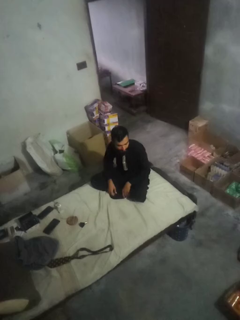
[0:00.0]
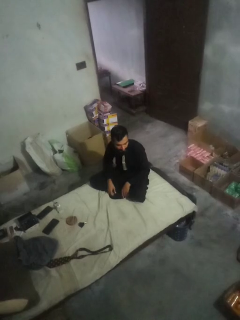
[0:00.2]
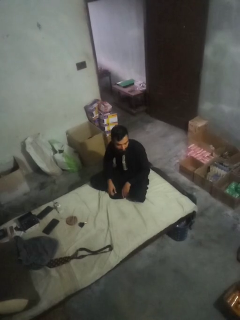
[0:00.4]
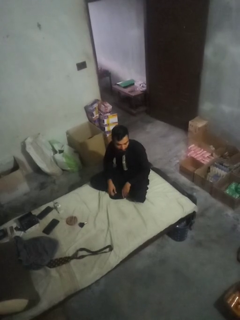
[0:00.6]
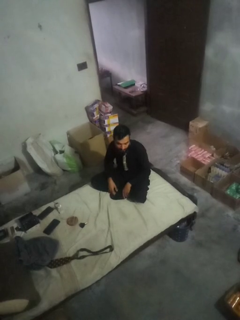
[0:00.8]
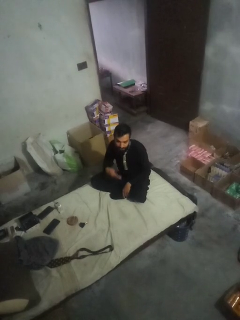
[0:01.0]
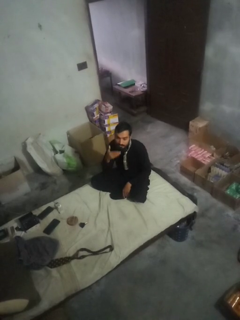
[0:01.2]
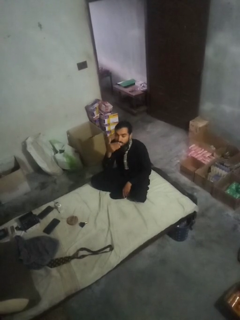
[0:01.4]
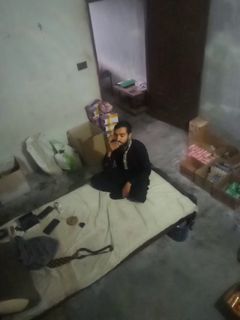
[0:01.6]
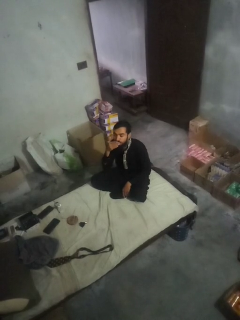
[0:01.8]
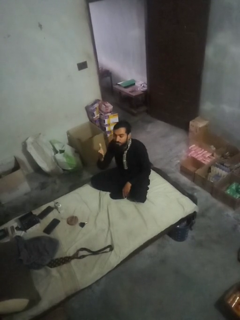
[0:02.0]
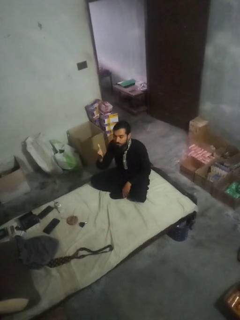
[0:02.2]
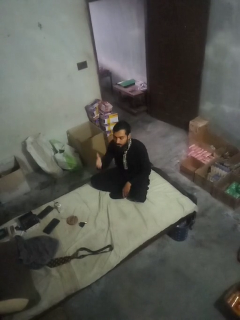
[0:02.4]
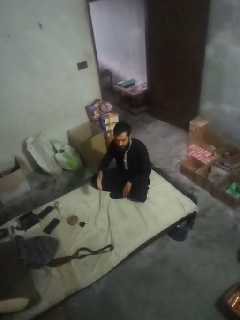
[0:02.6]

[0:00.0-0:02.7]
person gestures blow kiss

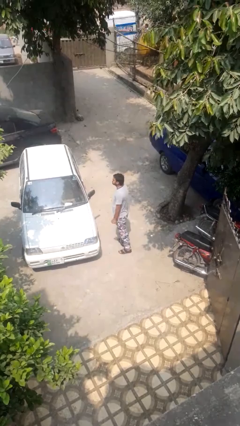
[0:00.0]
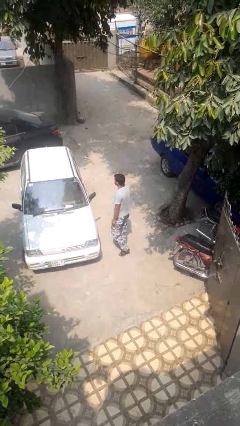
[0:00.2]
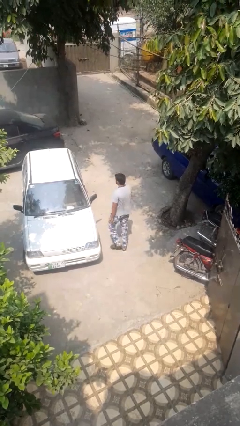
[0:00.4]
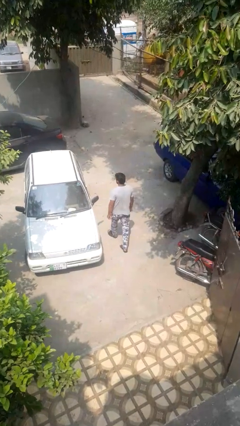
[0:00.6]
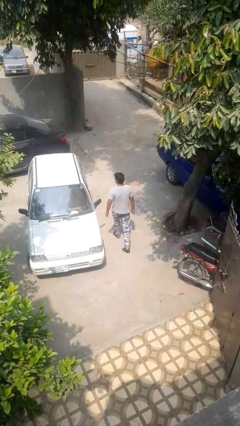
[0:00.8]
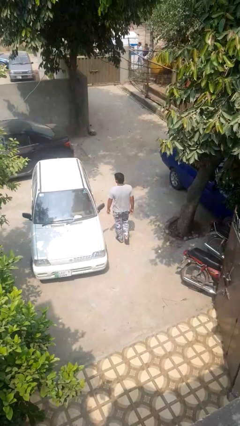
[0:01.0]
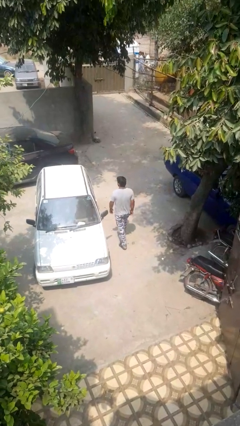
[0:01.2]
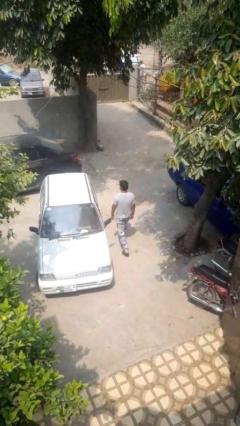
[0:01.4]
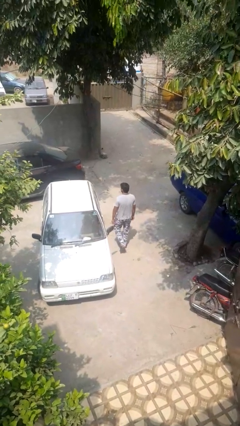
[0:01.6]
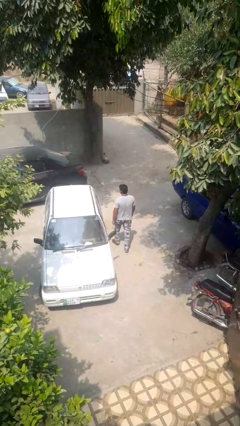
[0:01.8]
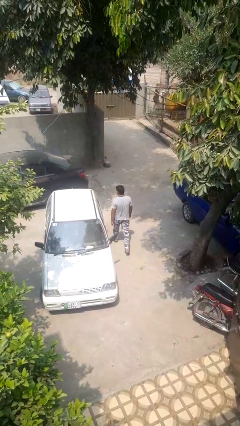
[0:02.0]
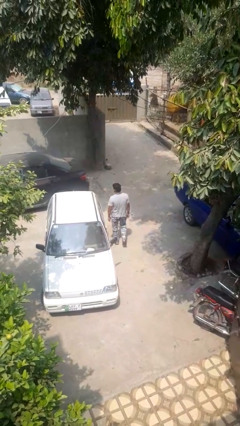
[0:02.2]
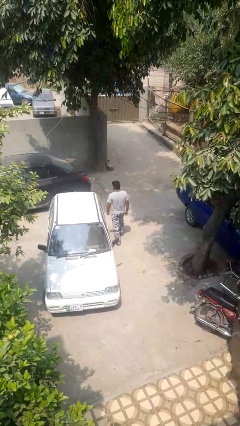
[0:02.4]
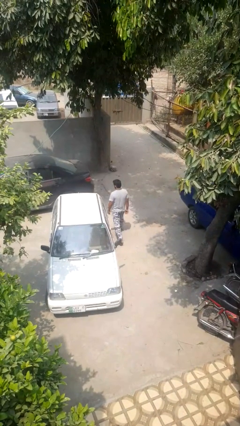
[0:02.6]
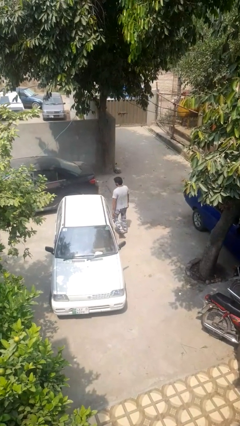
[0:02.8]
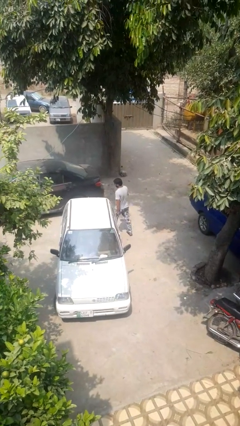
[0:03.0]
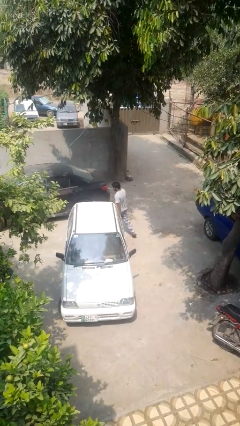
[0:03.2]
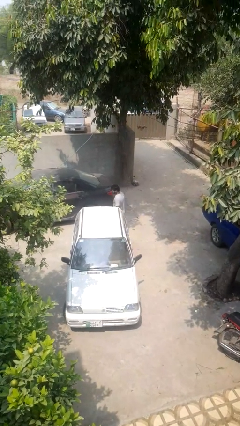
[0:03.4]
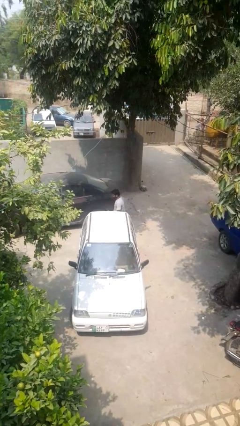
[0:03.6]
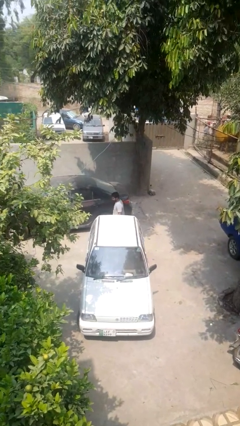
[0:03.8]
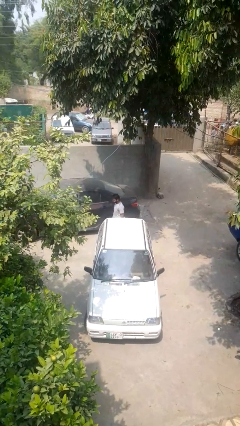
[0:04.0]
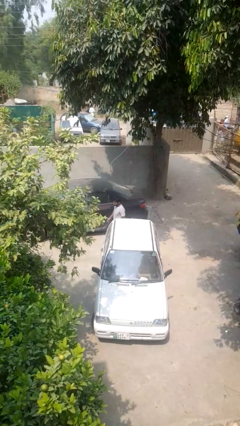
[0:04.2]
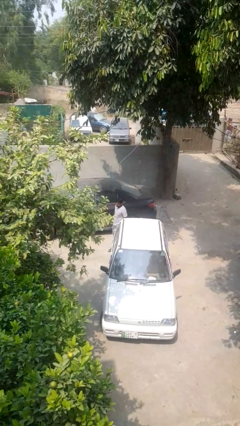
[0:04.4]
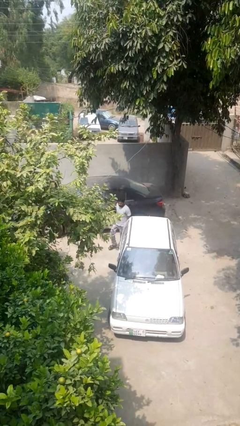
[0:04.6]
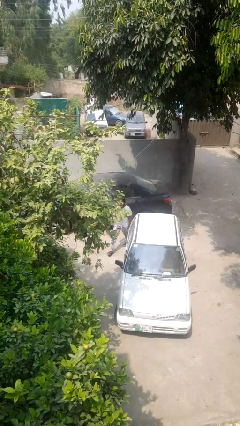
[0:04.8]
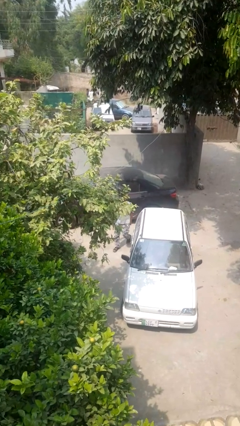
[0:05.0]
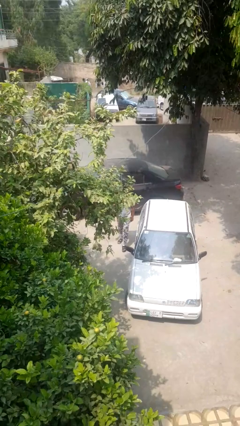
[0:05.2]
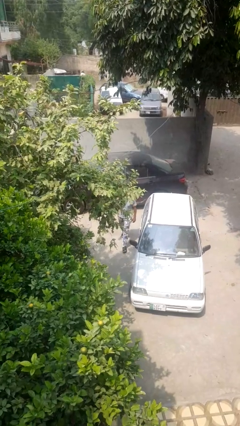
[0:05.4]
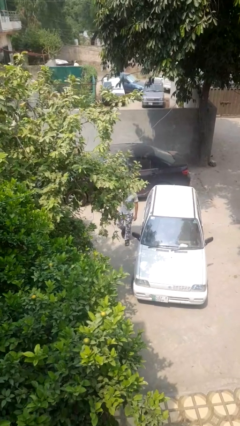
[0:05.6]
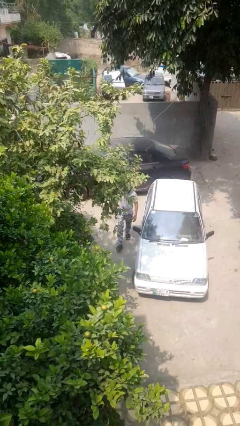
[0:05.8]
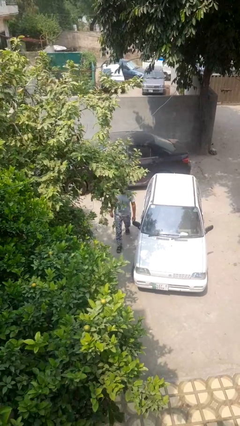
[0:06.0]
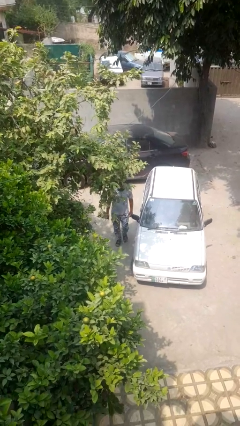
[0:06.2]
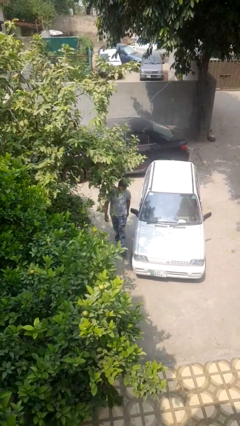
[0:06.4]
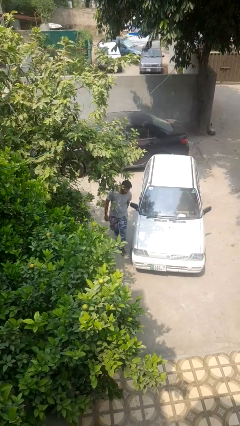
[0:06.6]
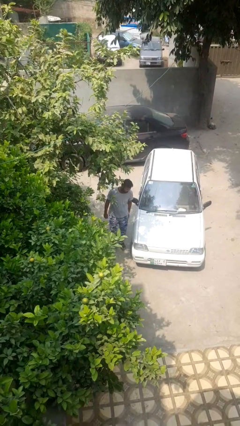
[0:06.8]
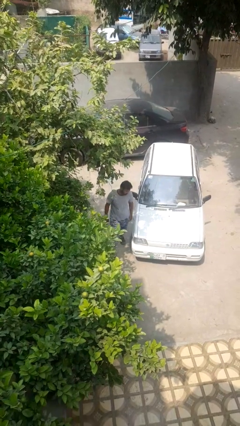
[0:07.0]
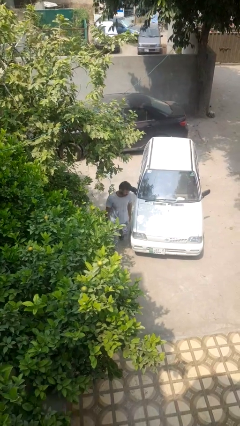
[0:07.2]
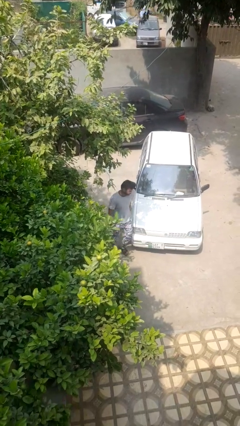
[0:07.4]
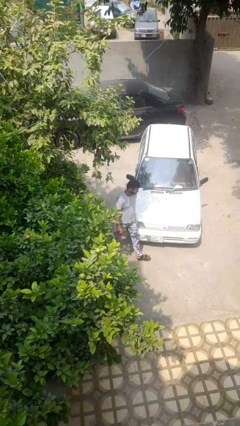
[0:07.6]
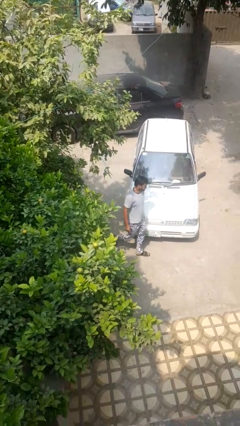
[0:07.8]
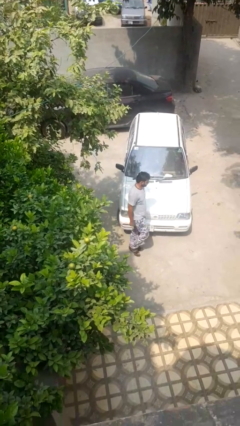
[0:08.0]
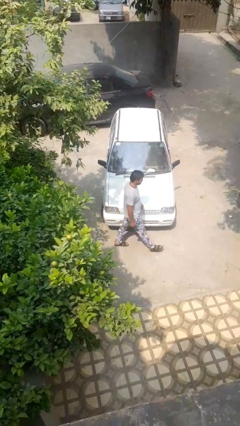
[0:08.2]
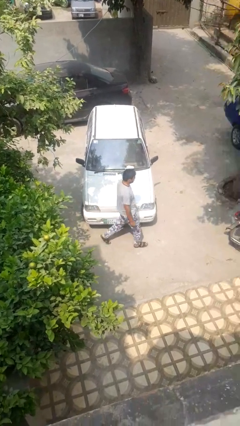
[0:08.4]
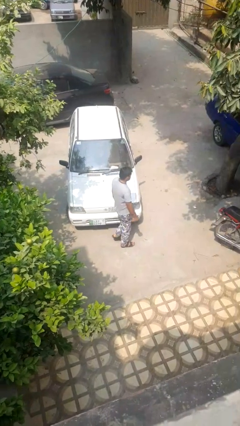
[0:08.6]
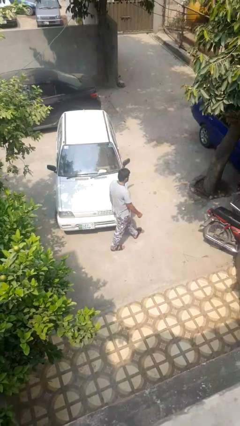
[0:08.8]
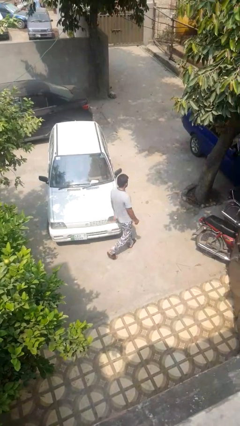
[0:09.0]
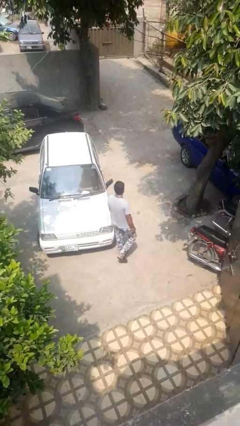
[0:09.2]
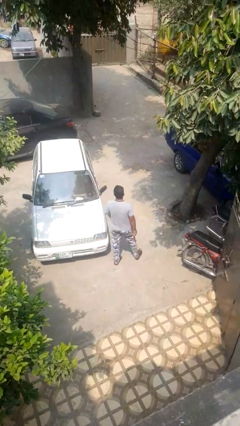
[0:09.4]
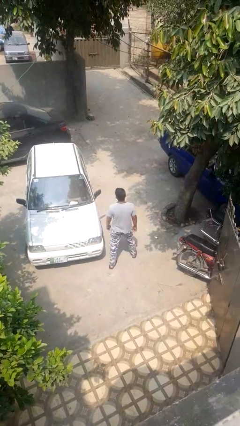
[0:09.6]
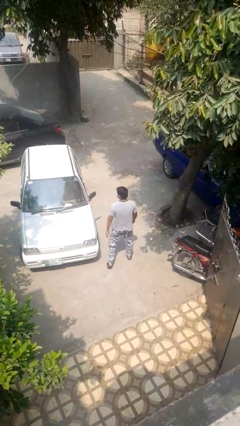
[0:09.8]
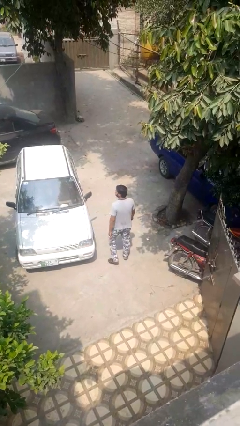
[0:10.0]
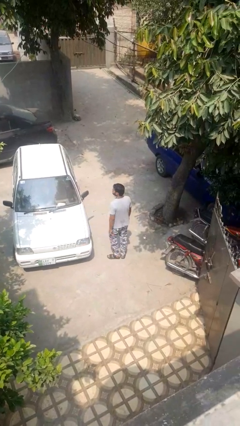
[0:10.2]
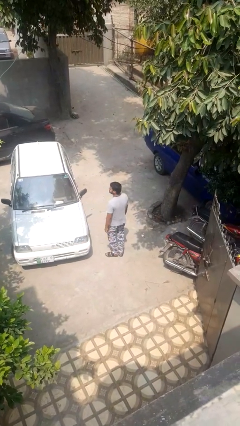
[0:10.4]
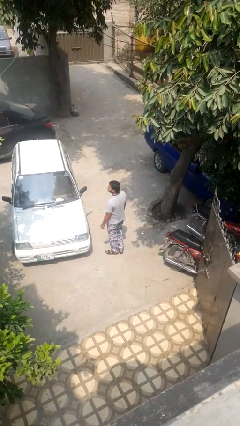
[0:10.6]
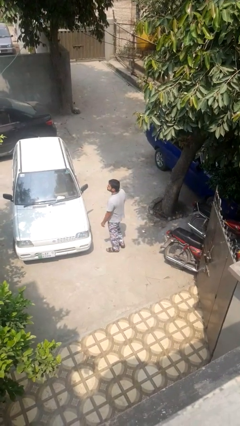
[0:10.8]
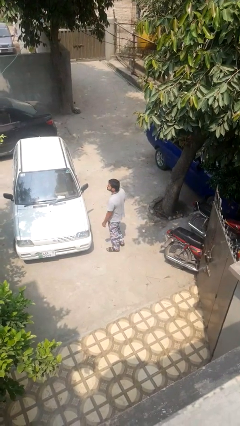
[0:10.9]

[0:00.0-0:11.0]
person walks around car

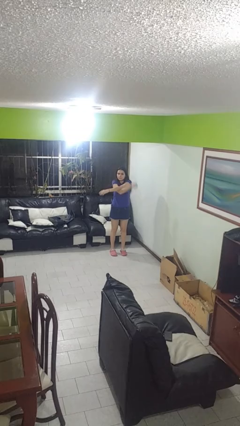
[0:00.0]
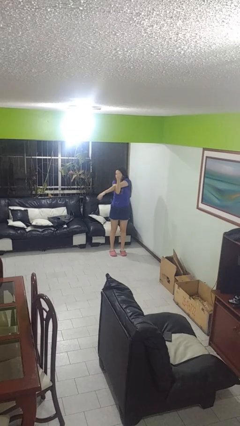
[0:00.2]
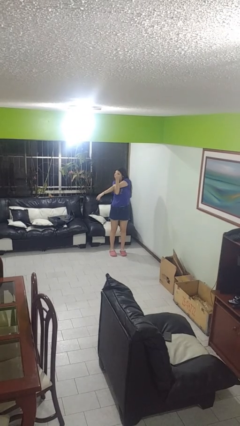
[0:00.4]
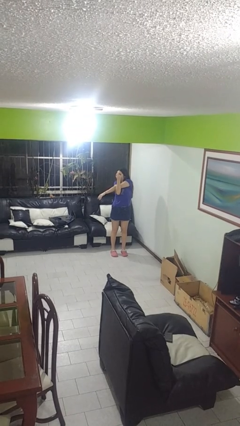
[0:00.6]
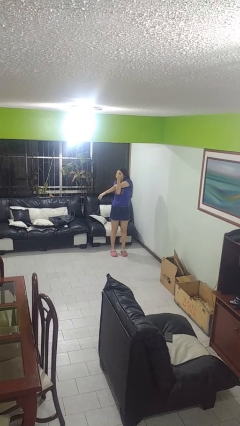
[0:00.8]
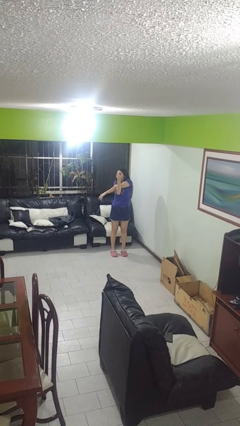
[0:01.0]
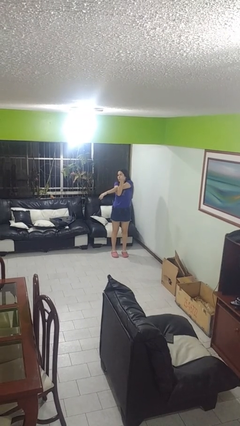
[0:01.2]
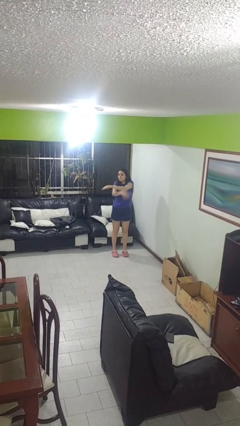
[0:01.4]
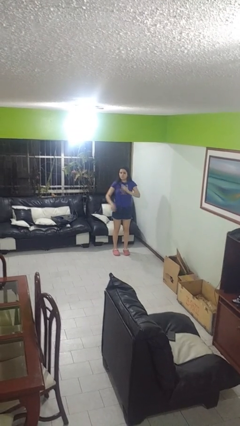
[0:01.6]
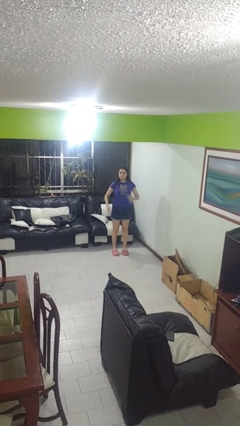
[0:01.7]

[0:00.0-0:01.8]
person stretches arms to side

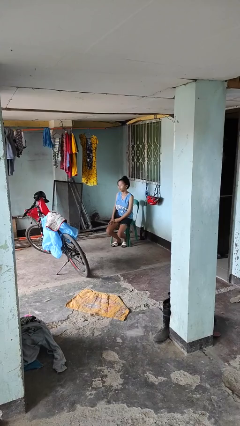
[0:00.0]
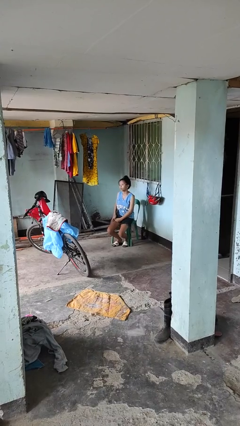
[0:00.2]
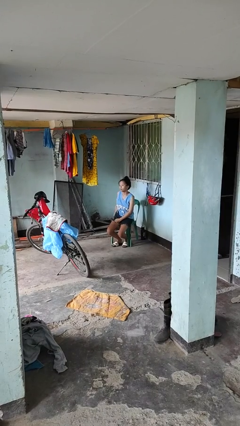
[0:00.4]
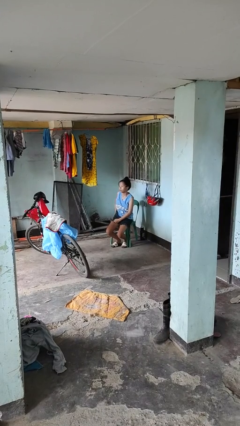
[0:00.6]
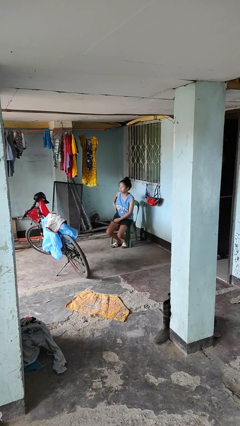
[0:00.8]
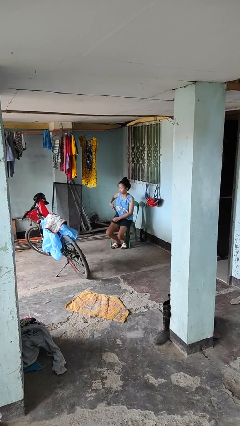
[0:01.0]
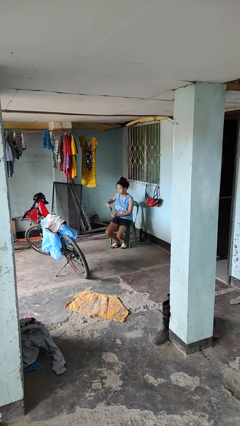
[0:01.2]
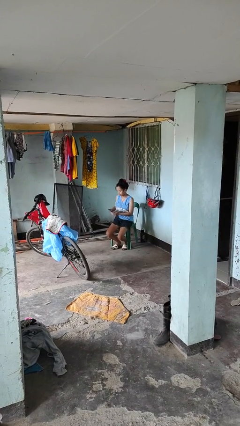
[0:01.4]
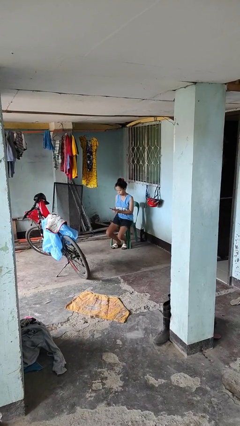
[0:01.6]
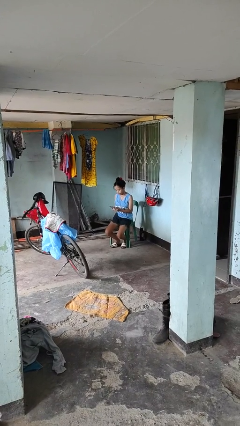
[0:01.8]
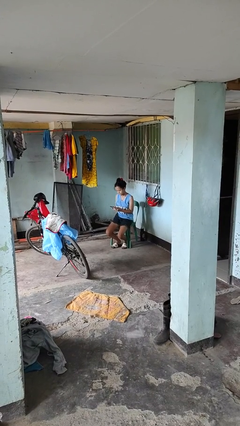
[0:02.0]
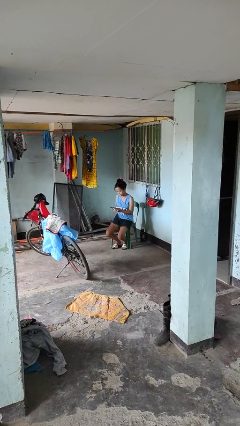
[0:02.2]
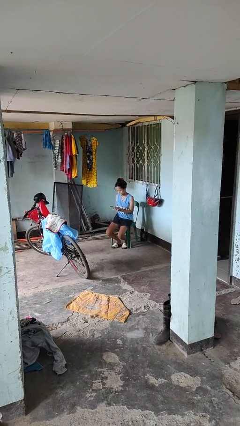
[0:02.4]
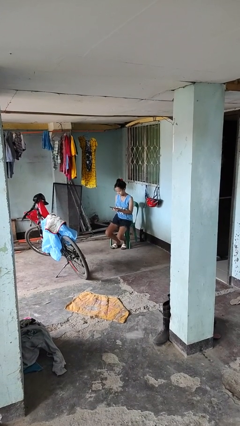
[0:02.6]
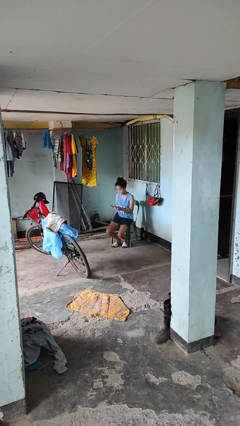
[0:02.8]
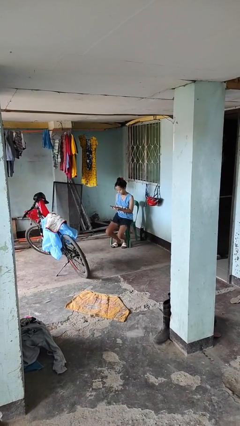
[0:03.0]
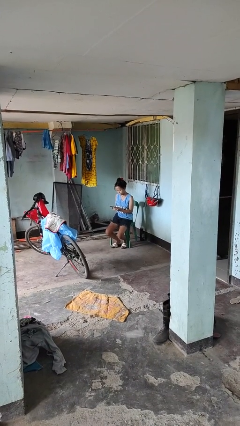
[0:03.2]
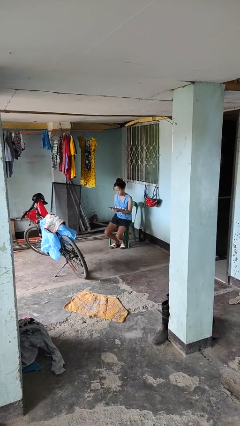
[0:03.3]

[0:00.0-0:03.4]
person takes phone from pocket
